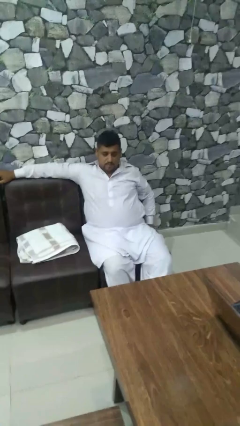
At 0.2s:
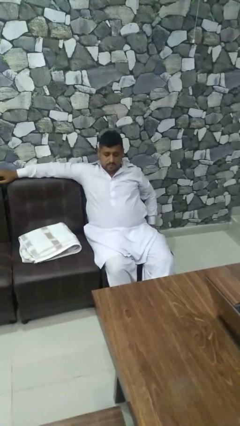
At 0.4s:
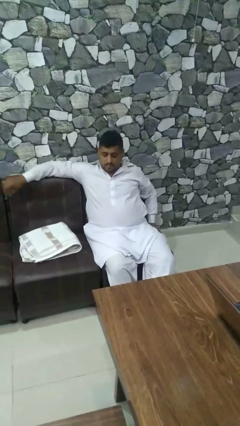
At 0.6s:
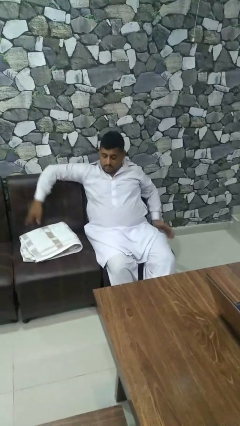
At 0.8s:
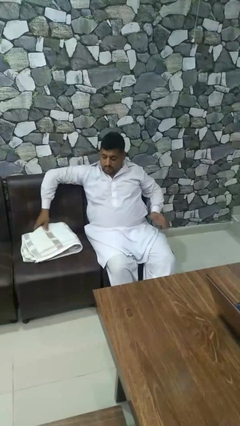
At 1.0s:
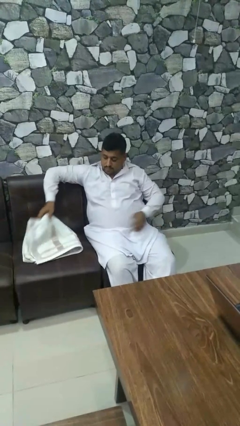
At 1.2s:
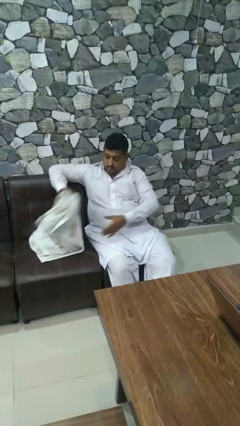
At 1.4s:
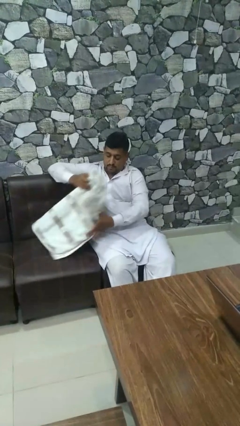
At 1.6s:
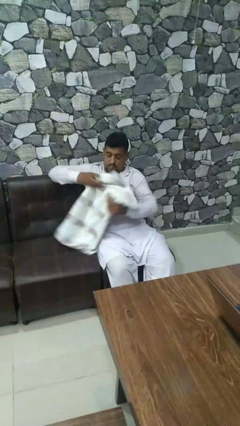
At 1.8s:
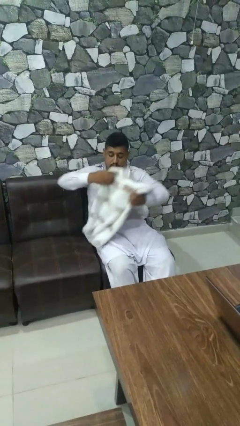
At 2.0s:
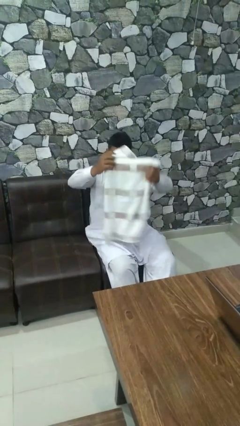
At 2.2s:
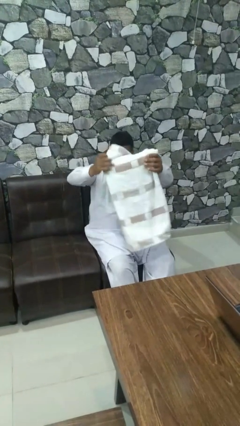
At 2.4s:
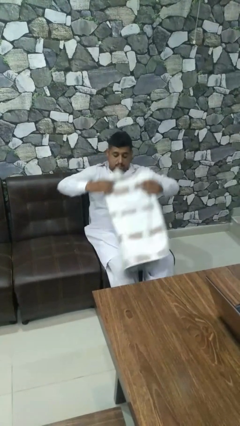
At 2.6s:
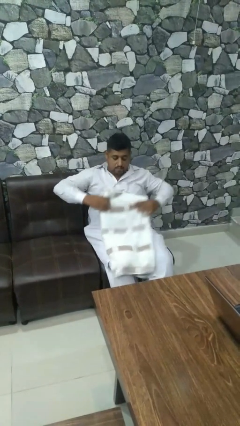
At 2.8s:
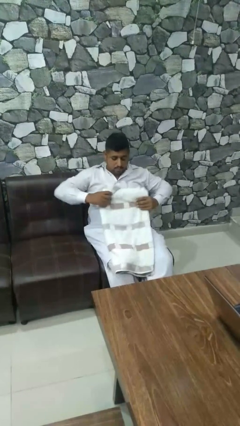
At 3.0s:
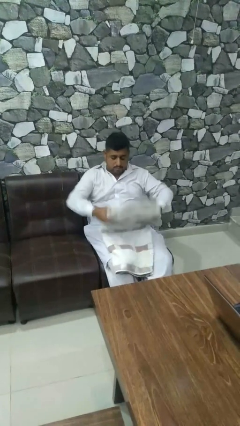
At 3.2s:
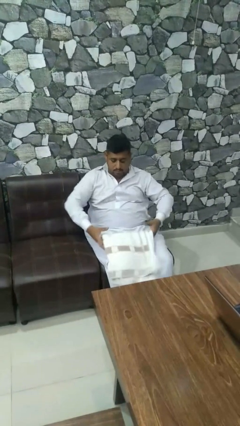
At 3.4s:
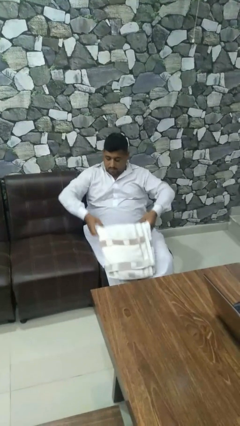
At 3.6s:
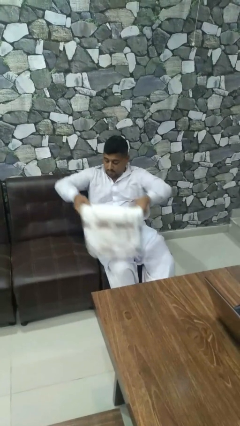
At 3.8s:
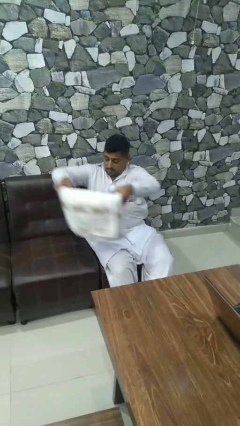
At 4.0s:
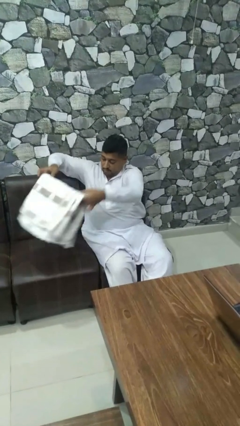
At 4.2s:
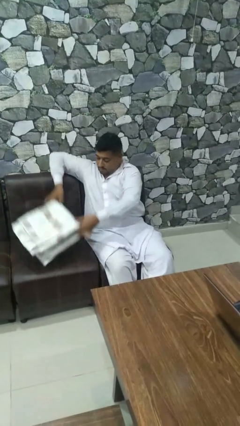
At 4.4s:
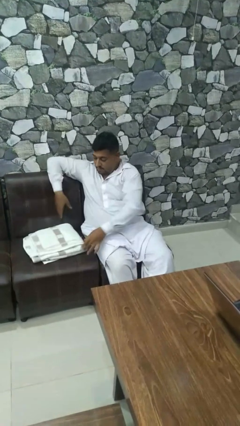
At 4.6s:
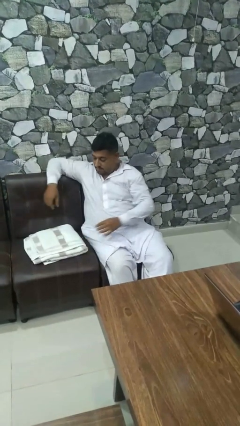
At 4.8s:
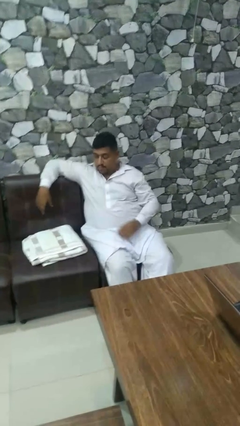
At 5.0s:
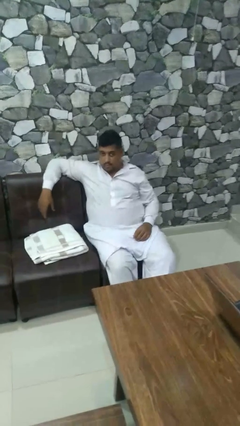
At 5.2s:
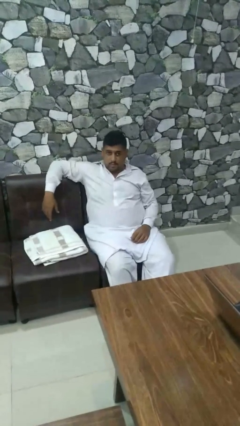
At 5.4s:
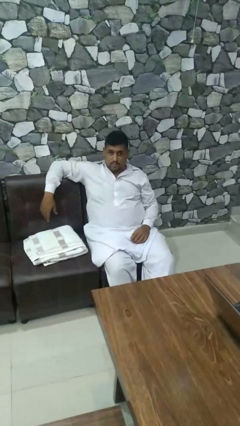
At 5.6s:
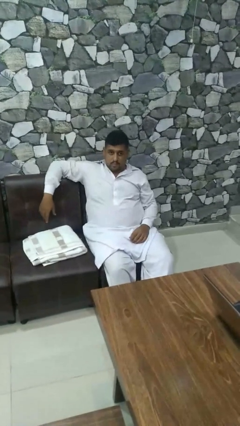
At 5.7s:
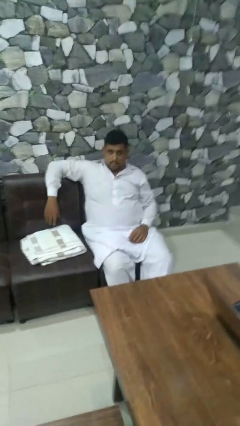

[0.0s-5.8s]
person folds towel

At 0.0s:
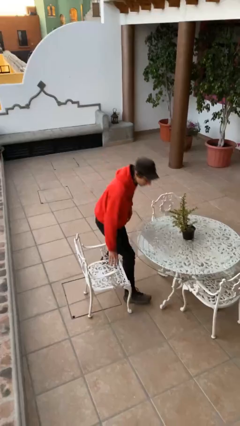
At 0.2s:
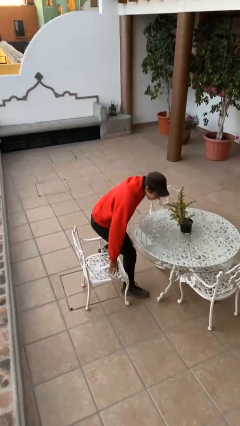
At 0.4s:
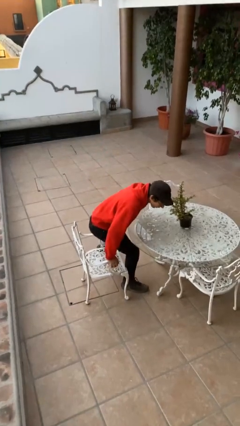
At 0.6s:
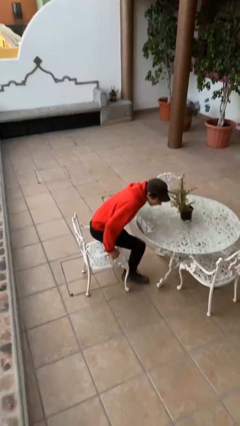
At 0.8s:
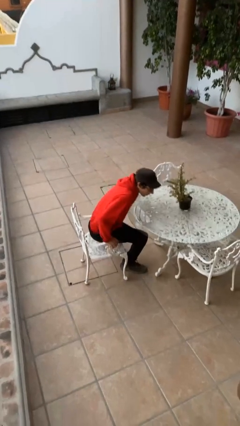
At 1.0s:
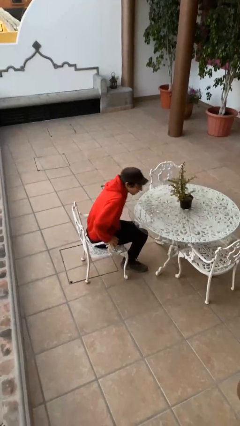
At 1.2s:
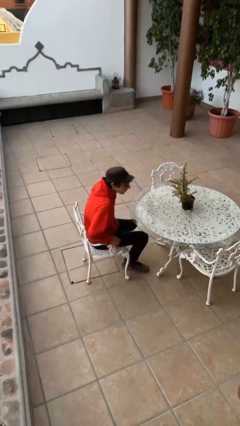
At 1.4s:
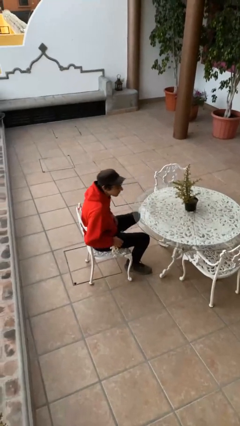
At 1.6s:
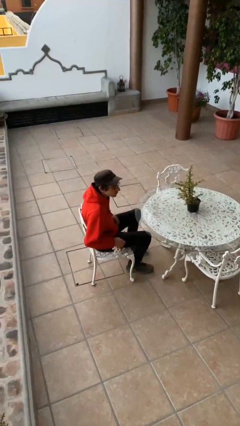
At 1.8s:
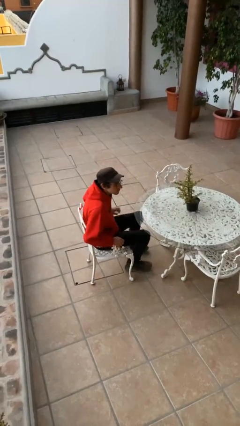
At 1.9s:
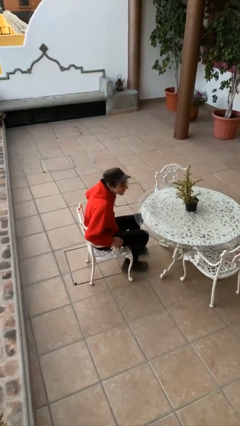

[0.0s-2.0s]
person sits down

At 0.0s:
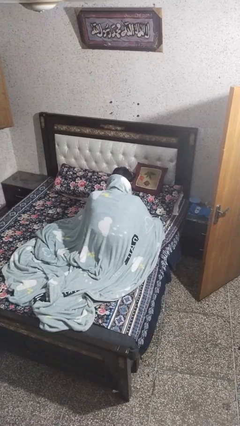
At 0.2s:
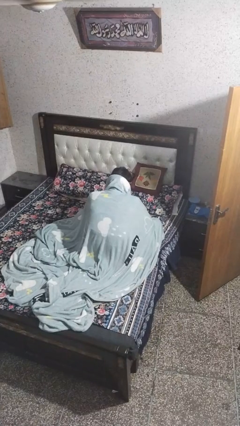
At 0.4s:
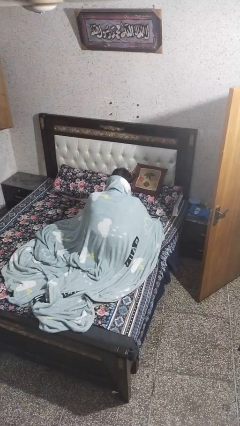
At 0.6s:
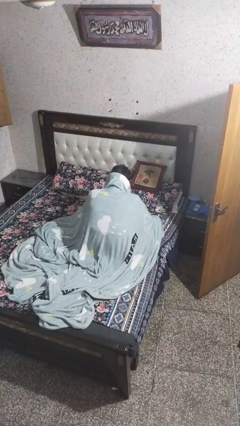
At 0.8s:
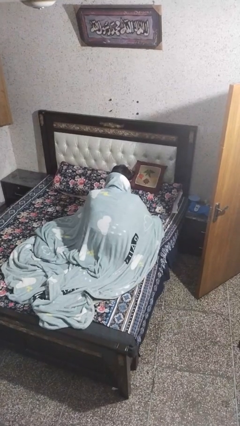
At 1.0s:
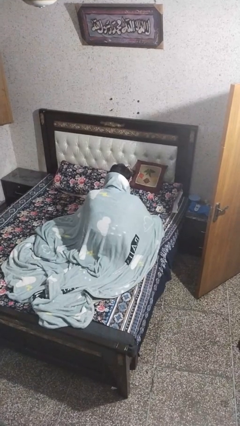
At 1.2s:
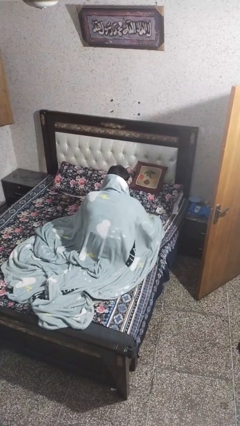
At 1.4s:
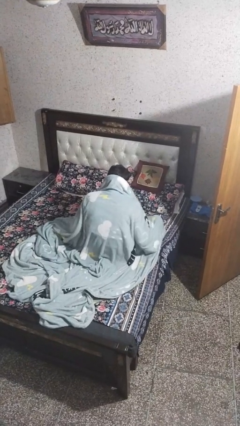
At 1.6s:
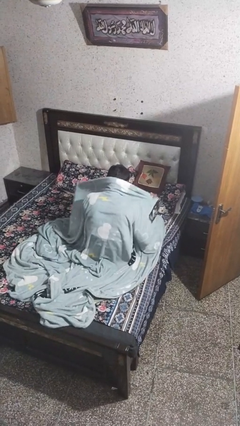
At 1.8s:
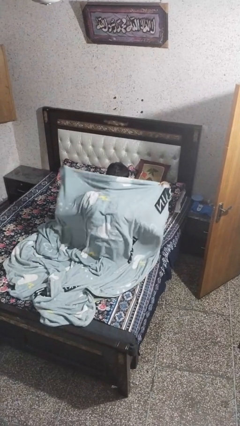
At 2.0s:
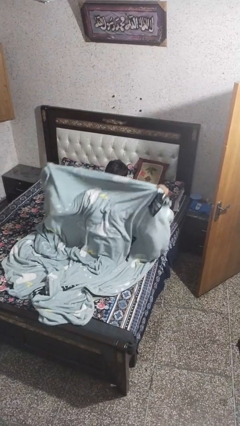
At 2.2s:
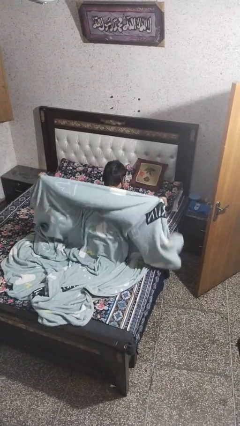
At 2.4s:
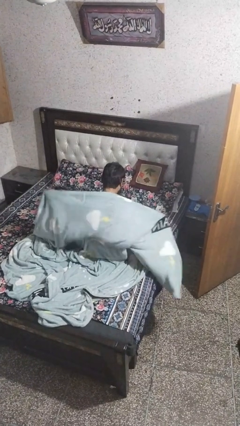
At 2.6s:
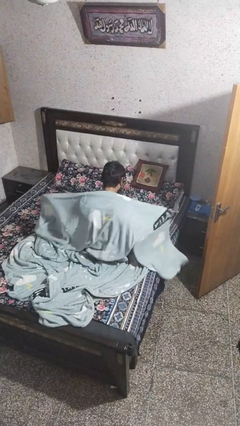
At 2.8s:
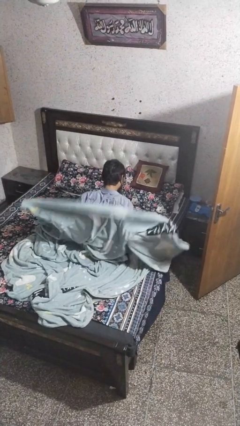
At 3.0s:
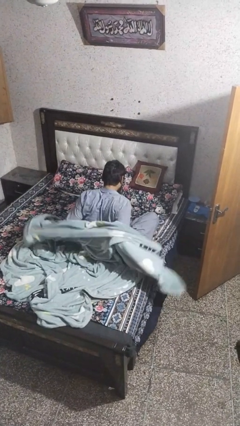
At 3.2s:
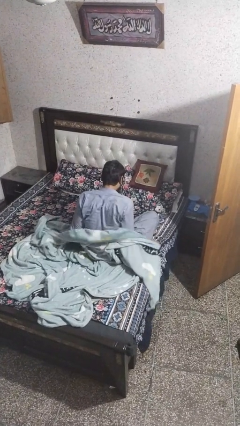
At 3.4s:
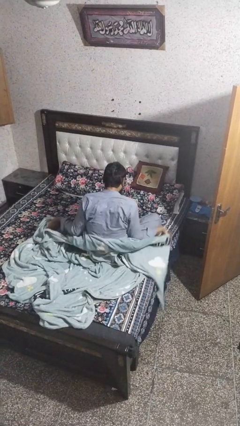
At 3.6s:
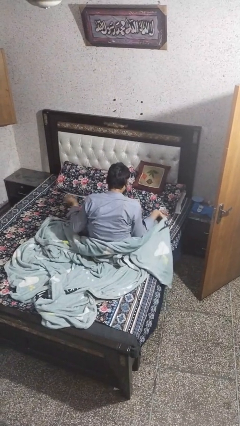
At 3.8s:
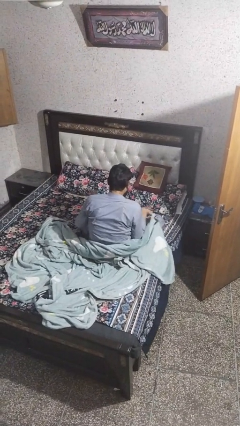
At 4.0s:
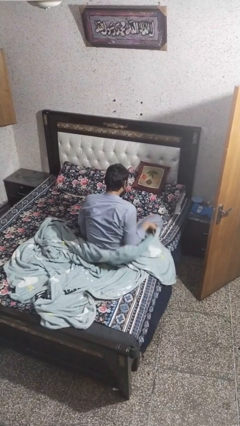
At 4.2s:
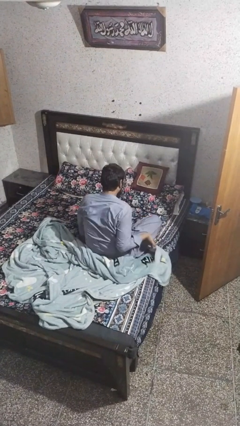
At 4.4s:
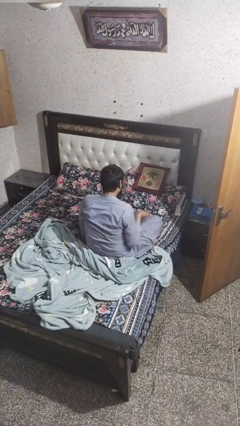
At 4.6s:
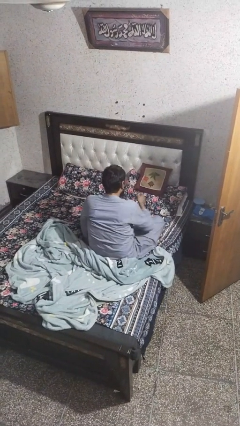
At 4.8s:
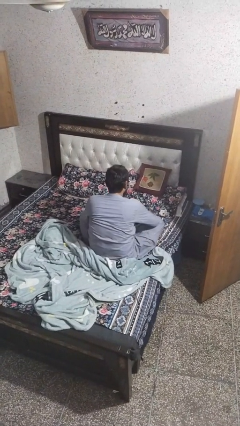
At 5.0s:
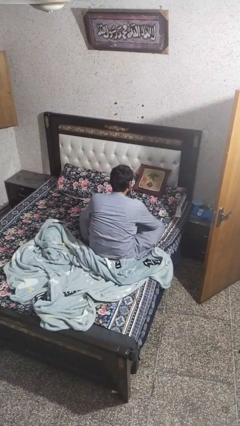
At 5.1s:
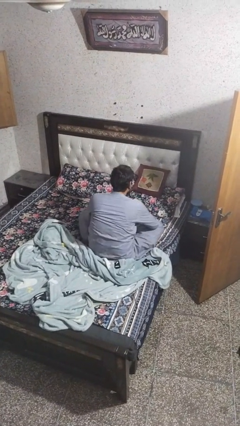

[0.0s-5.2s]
person uncovers with blanket

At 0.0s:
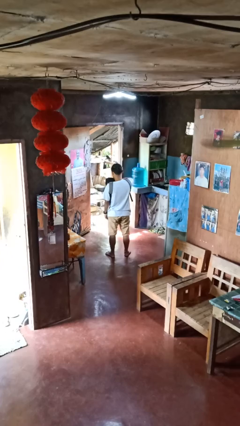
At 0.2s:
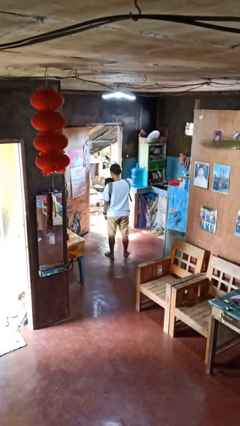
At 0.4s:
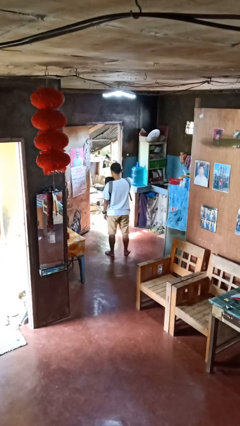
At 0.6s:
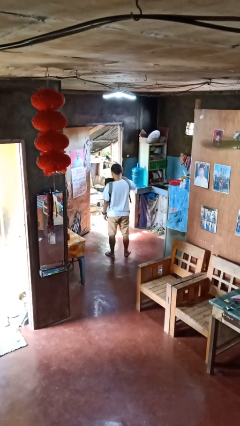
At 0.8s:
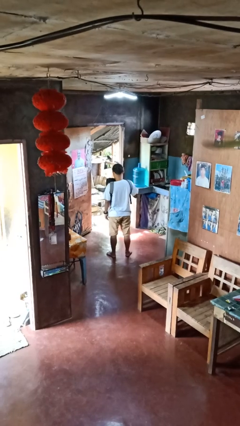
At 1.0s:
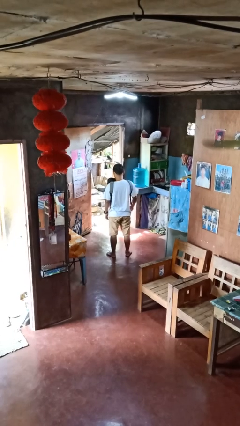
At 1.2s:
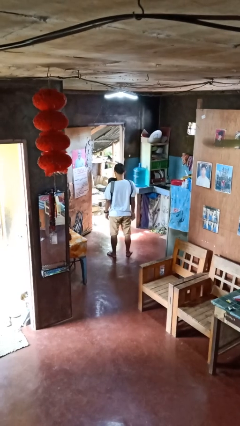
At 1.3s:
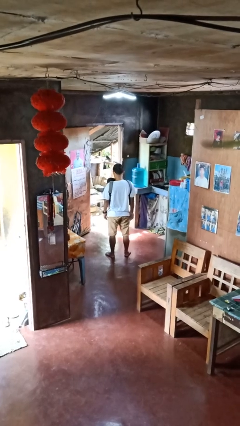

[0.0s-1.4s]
person puts object into backpack

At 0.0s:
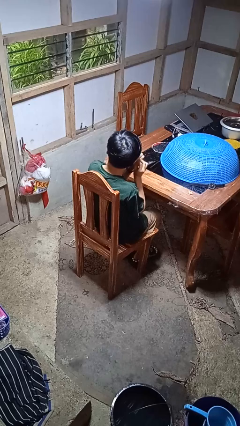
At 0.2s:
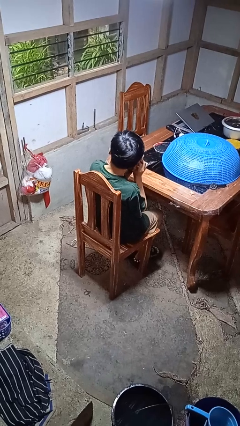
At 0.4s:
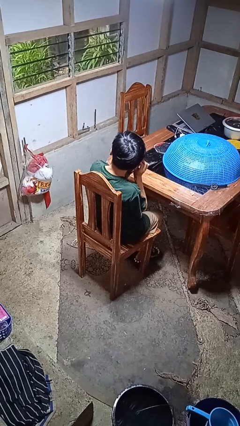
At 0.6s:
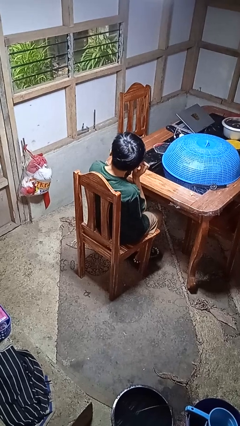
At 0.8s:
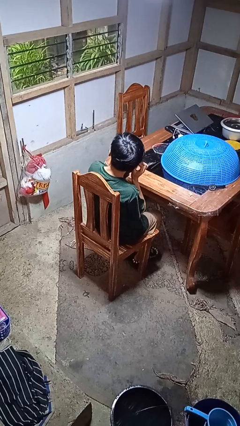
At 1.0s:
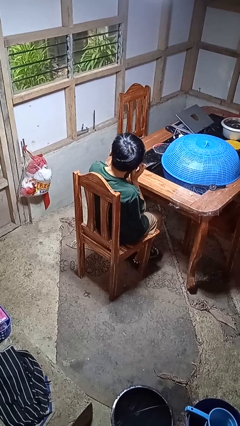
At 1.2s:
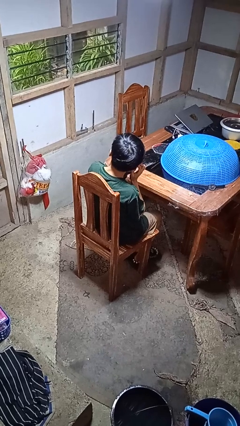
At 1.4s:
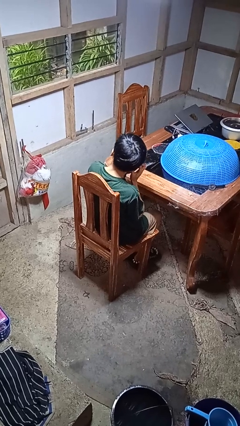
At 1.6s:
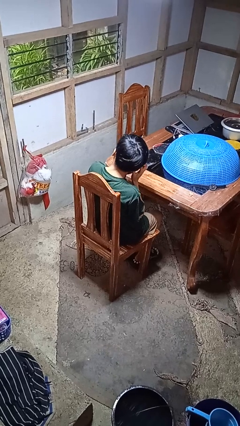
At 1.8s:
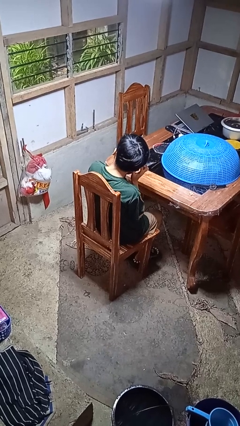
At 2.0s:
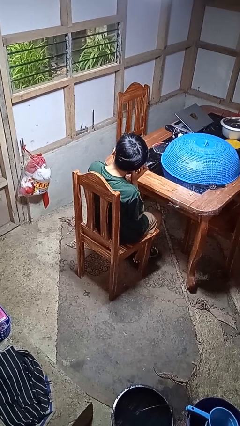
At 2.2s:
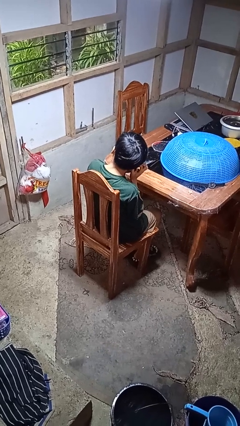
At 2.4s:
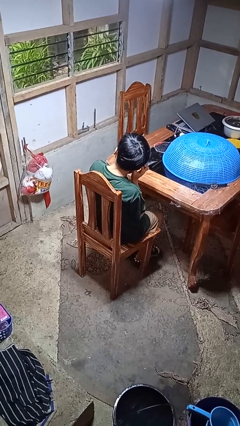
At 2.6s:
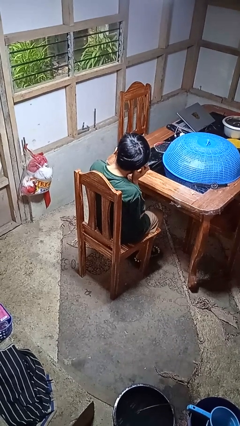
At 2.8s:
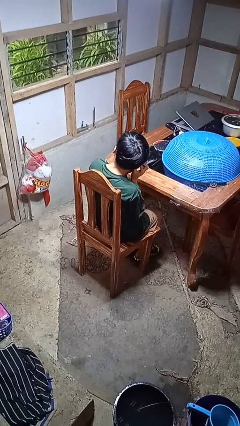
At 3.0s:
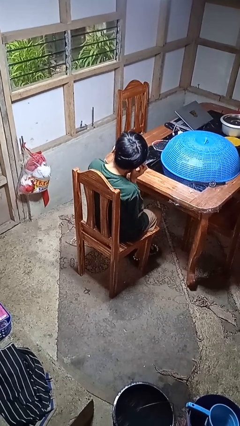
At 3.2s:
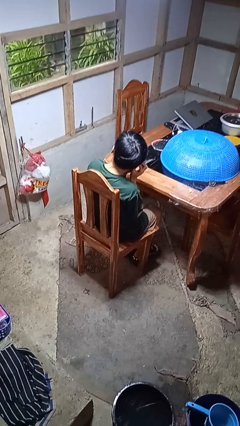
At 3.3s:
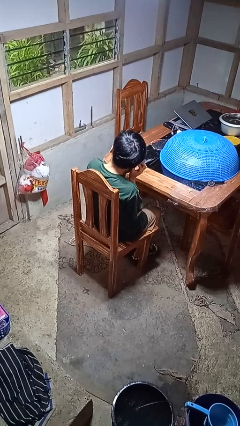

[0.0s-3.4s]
person puts on earrings
